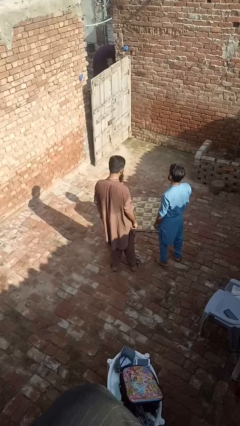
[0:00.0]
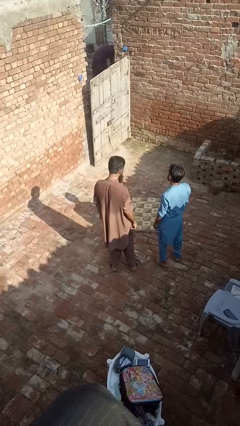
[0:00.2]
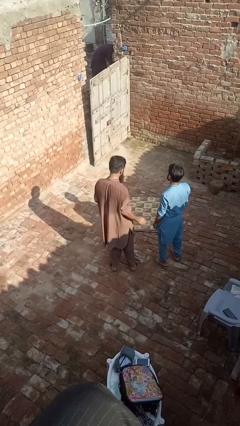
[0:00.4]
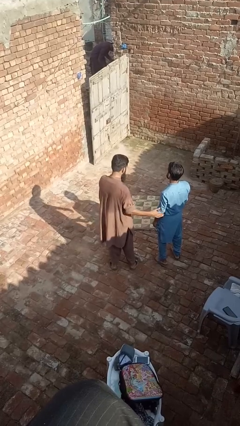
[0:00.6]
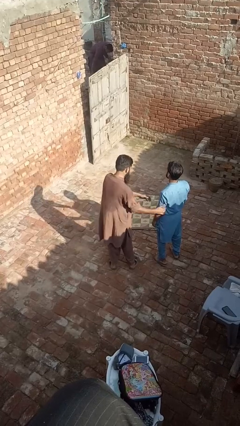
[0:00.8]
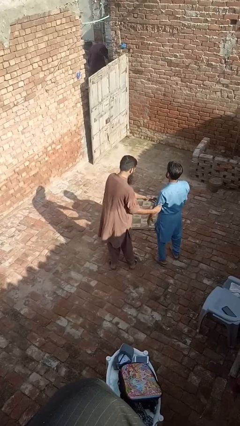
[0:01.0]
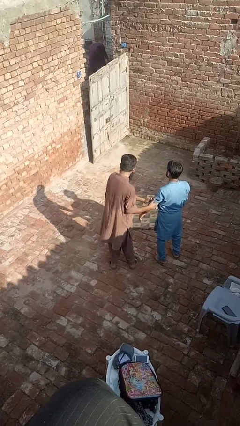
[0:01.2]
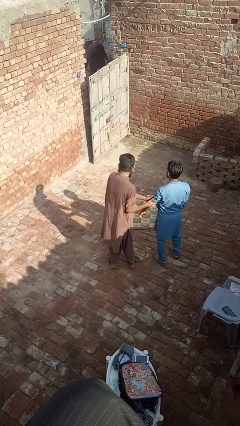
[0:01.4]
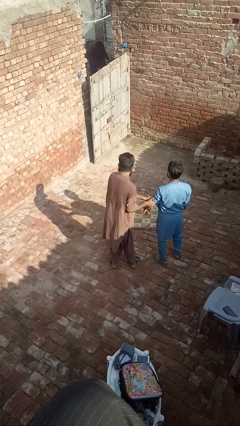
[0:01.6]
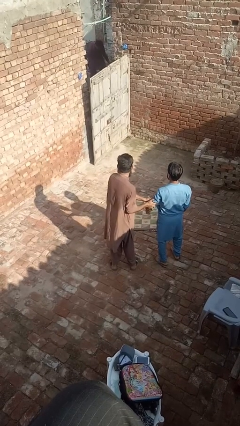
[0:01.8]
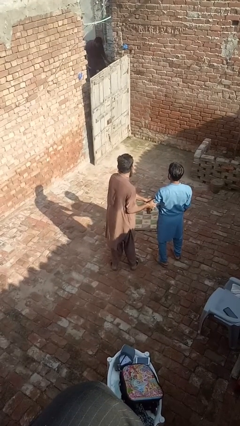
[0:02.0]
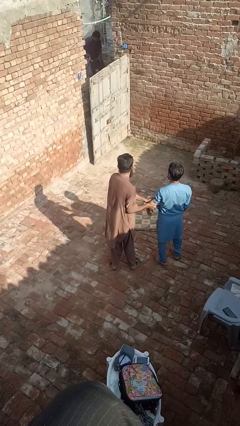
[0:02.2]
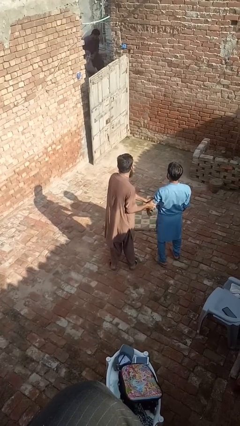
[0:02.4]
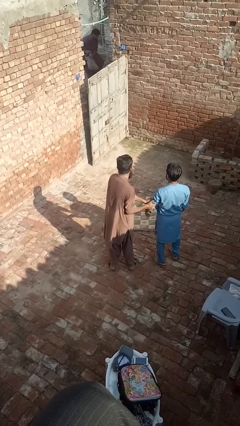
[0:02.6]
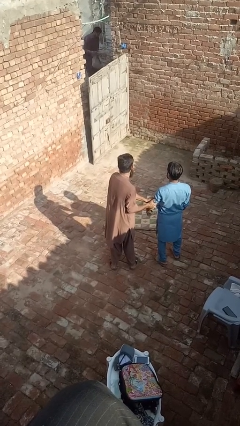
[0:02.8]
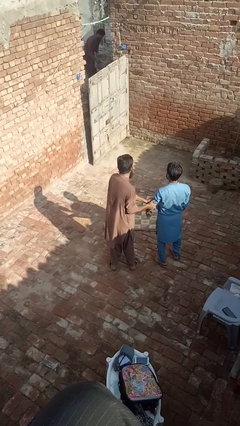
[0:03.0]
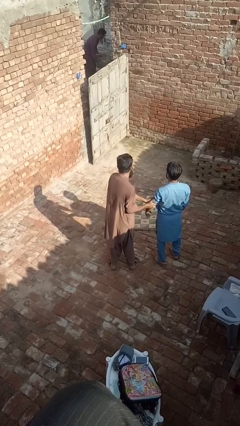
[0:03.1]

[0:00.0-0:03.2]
person grabs person by bicep

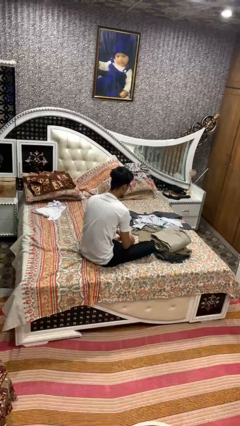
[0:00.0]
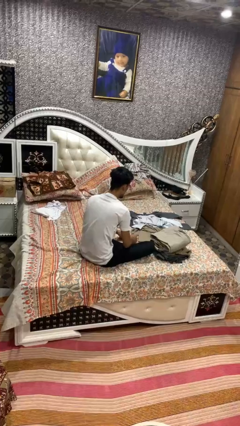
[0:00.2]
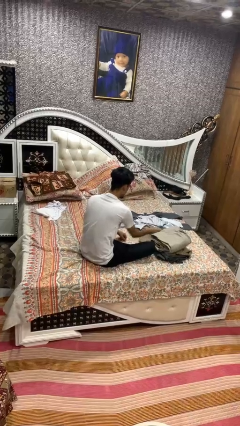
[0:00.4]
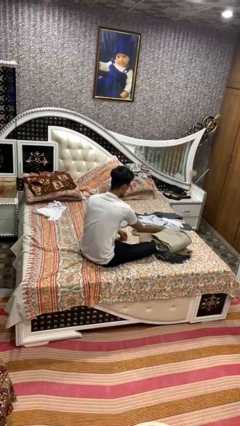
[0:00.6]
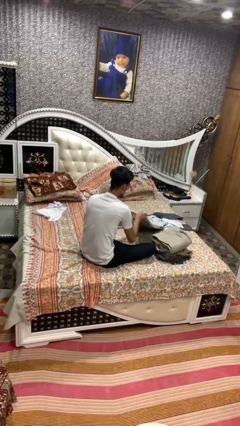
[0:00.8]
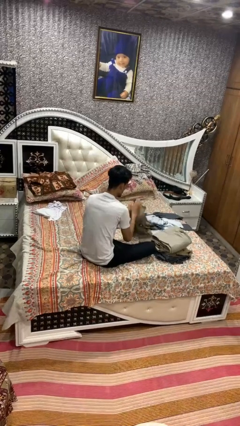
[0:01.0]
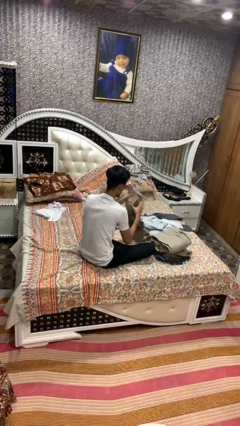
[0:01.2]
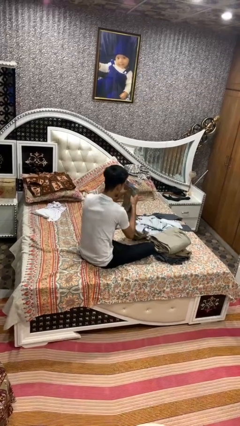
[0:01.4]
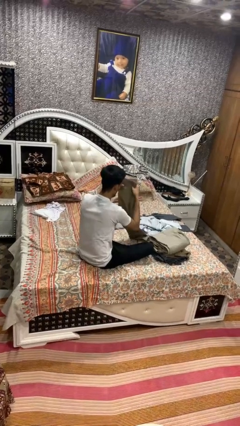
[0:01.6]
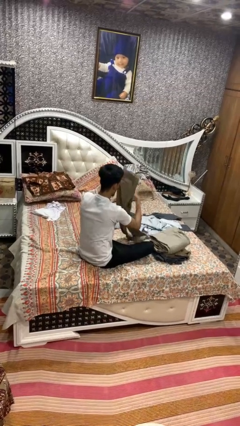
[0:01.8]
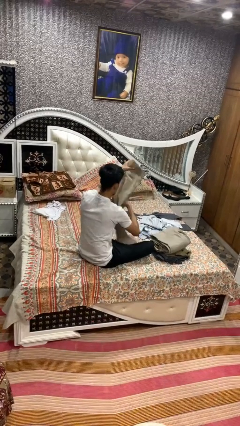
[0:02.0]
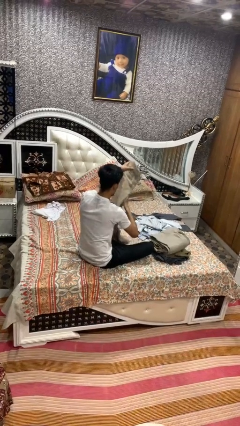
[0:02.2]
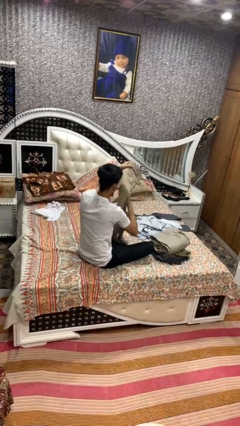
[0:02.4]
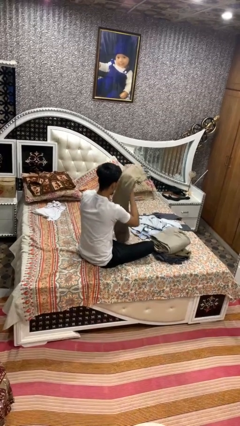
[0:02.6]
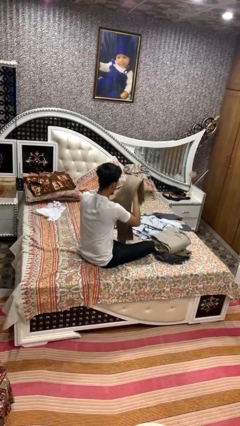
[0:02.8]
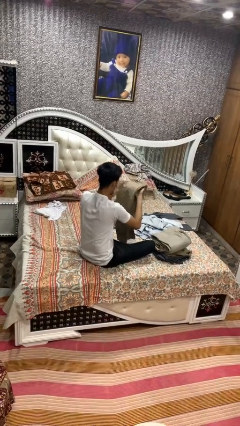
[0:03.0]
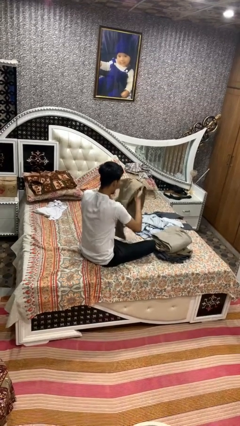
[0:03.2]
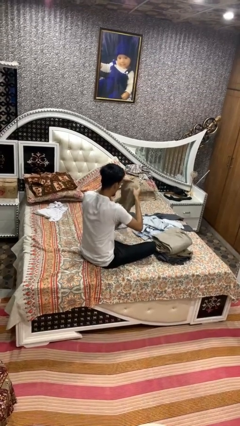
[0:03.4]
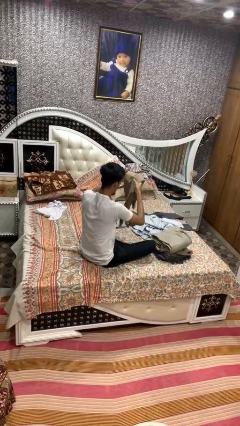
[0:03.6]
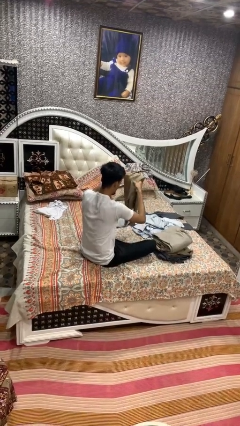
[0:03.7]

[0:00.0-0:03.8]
person folds pants

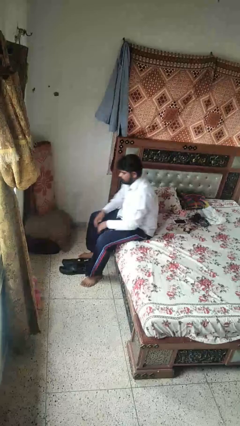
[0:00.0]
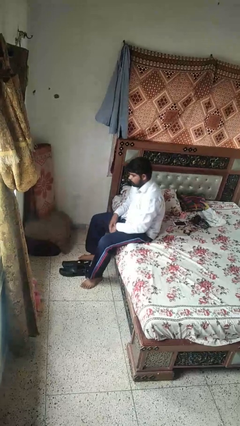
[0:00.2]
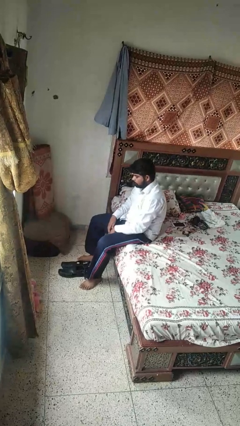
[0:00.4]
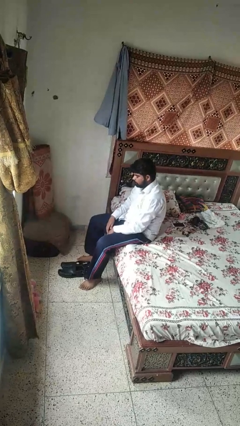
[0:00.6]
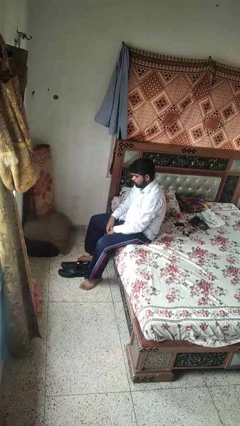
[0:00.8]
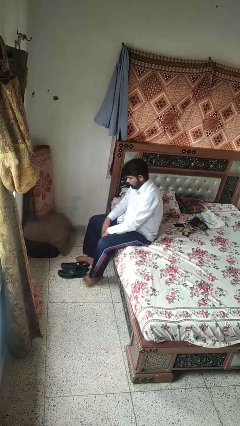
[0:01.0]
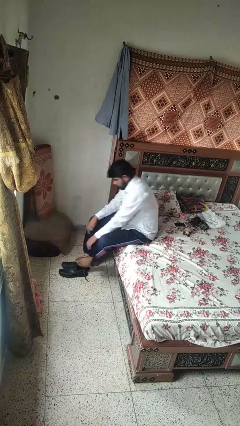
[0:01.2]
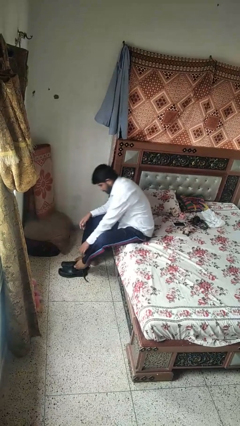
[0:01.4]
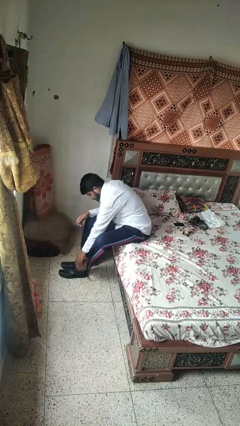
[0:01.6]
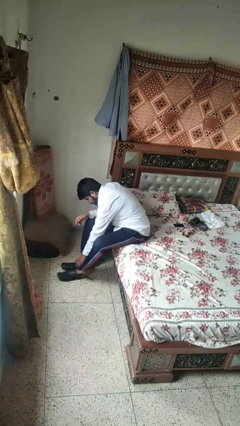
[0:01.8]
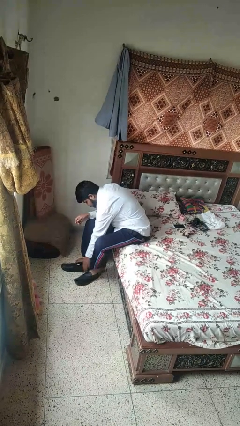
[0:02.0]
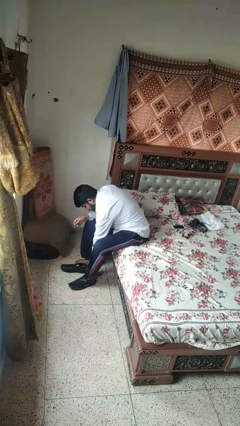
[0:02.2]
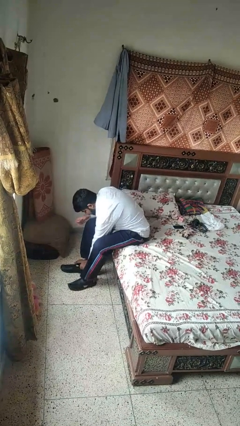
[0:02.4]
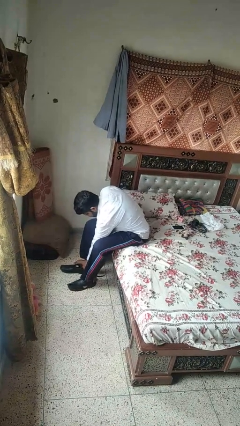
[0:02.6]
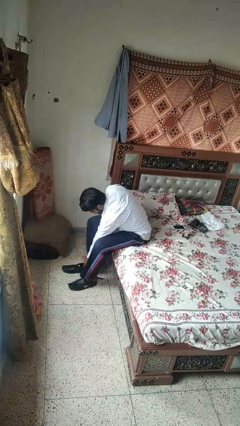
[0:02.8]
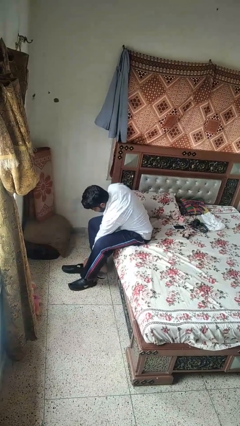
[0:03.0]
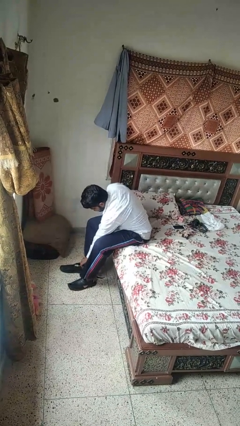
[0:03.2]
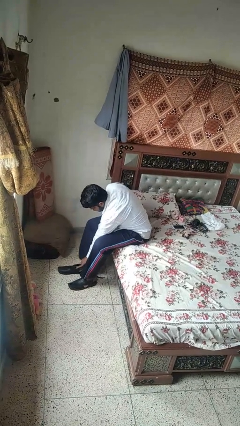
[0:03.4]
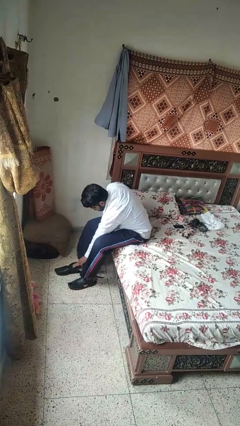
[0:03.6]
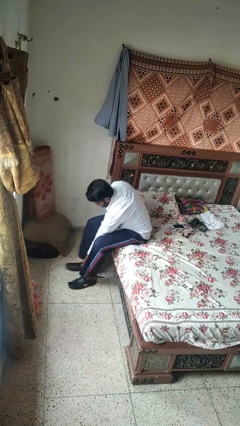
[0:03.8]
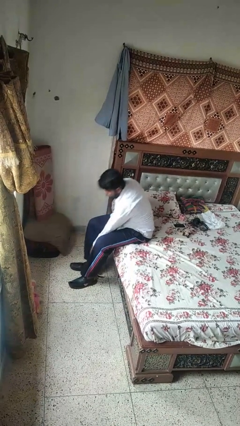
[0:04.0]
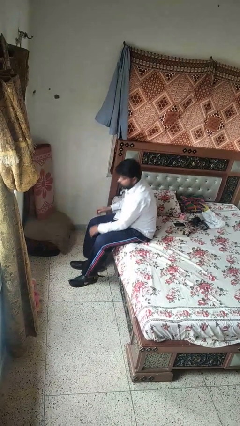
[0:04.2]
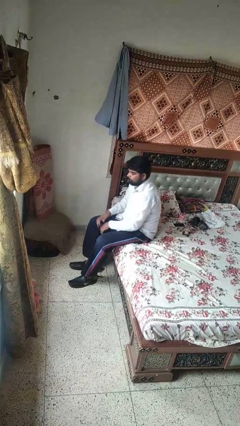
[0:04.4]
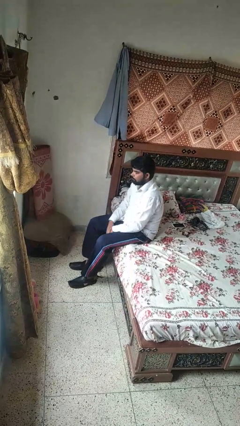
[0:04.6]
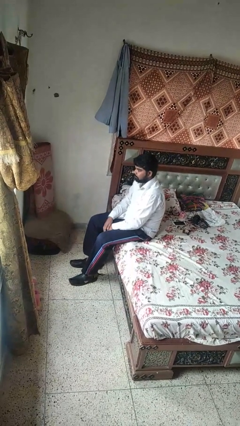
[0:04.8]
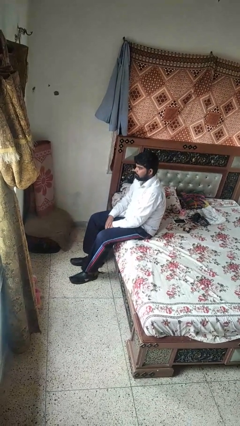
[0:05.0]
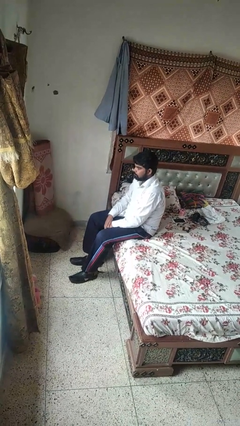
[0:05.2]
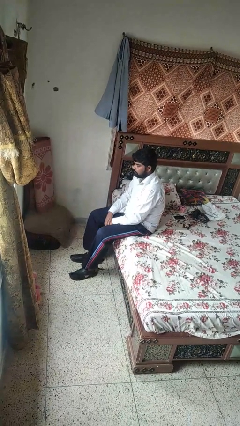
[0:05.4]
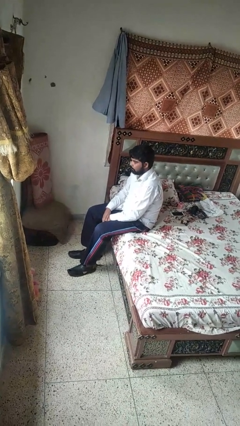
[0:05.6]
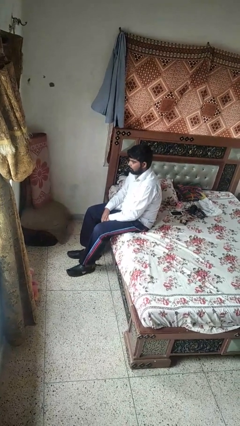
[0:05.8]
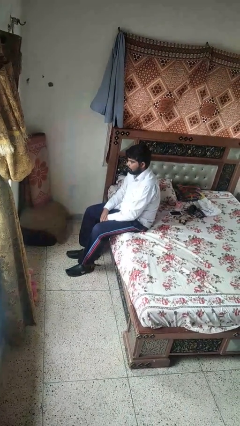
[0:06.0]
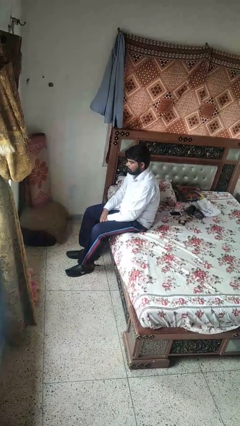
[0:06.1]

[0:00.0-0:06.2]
person puts on shoes

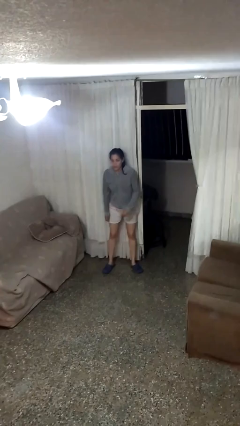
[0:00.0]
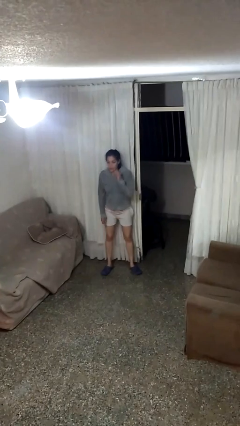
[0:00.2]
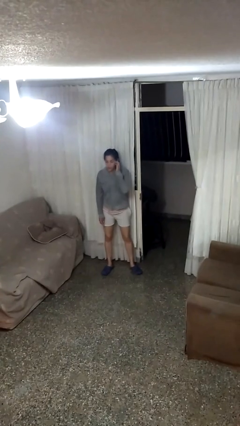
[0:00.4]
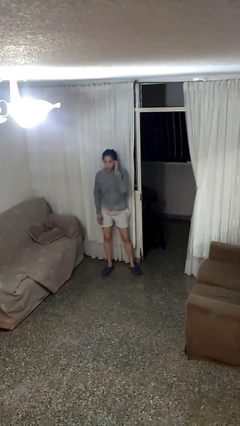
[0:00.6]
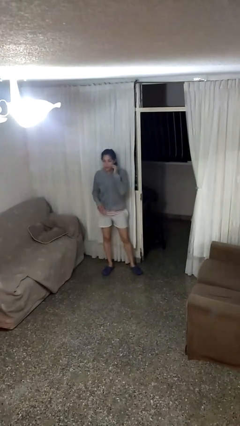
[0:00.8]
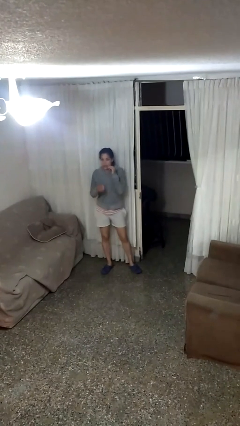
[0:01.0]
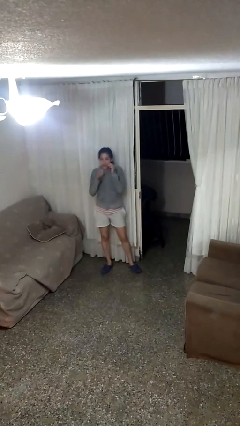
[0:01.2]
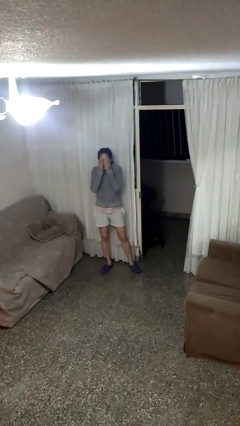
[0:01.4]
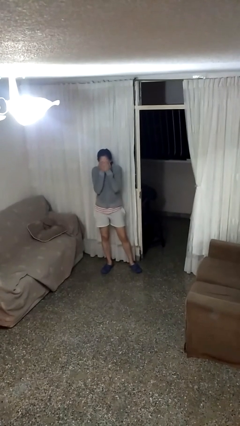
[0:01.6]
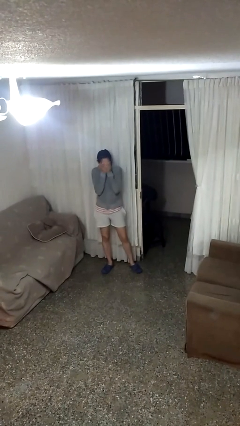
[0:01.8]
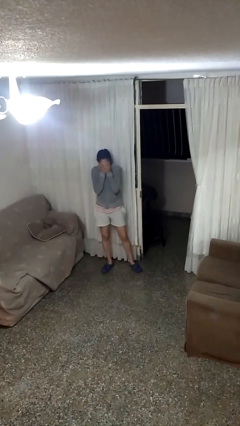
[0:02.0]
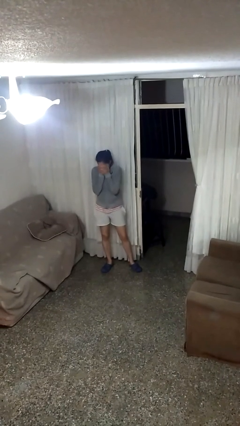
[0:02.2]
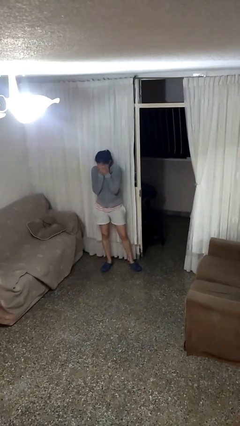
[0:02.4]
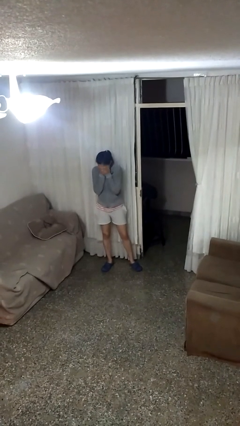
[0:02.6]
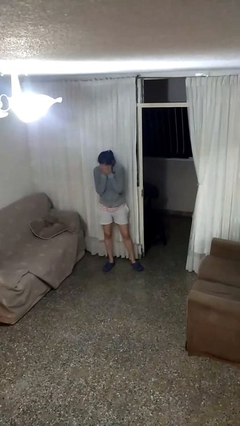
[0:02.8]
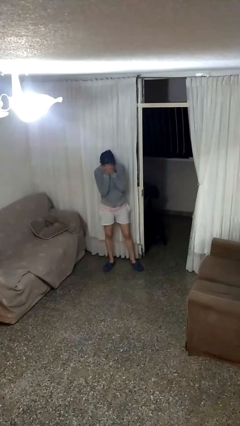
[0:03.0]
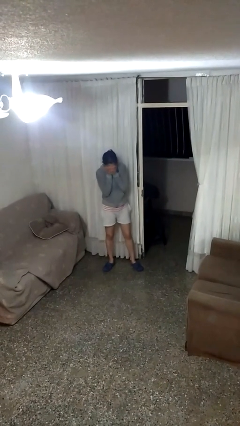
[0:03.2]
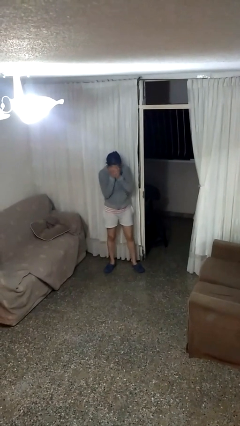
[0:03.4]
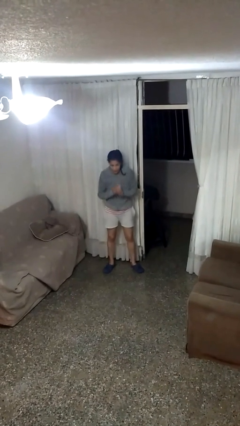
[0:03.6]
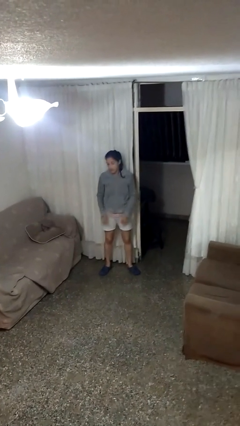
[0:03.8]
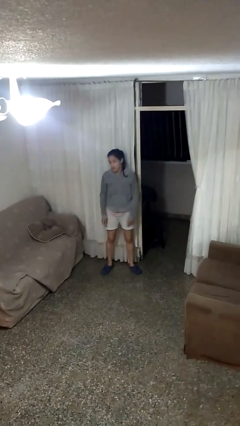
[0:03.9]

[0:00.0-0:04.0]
person covers face with hands

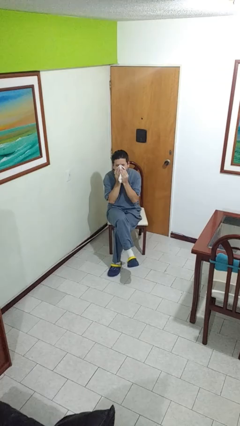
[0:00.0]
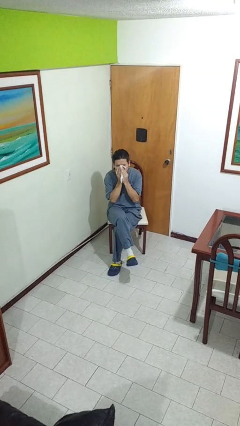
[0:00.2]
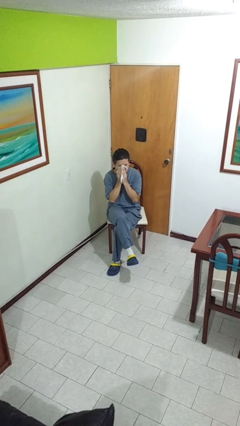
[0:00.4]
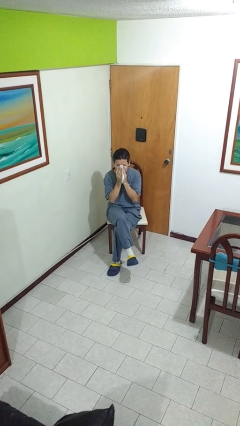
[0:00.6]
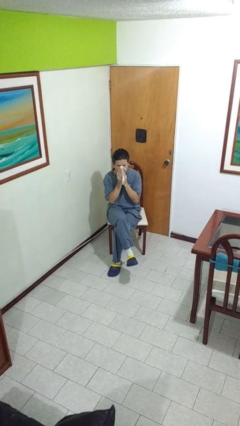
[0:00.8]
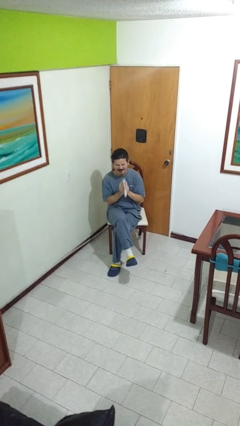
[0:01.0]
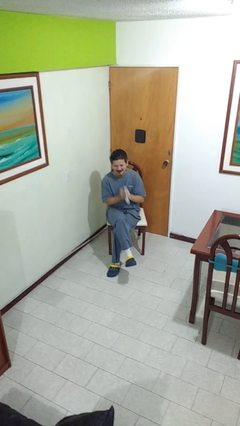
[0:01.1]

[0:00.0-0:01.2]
person blows nose
